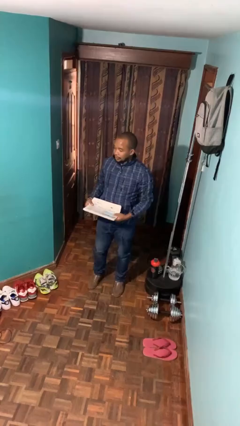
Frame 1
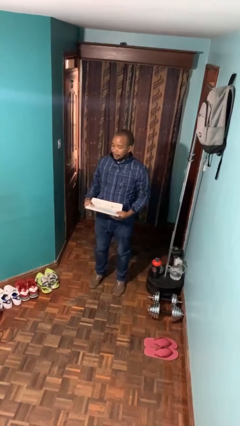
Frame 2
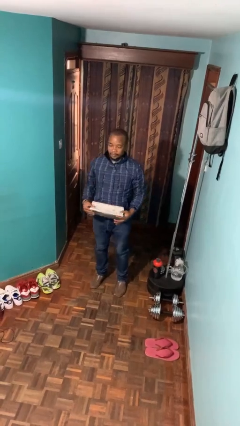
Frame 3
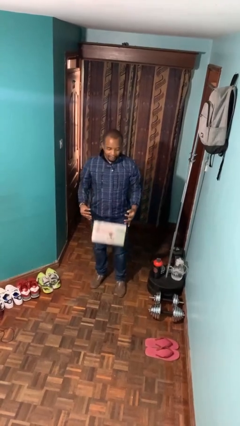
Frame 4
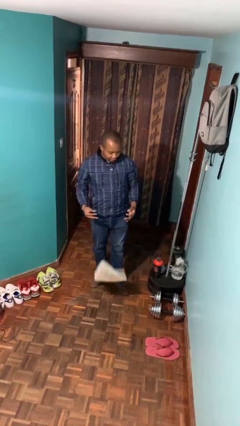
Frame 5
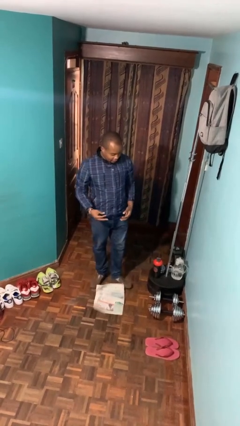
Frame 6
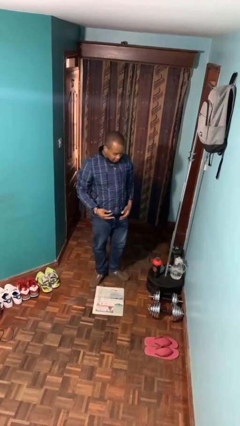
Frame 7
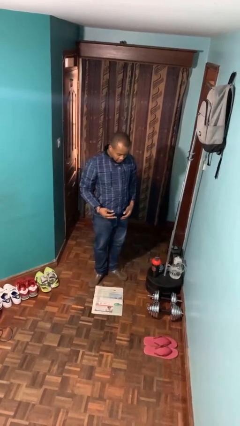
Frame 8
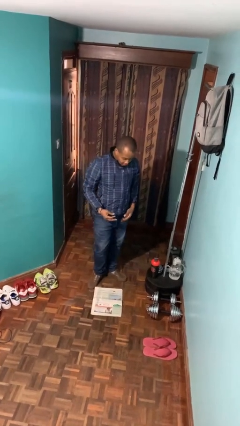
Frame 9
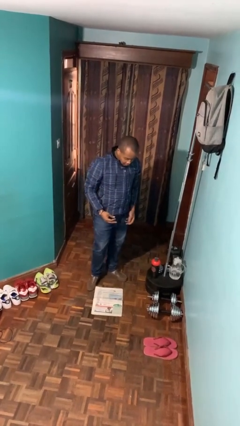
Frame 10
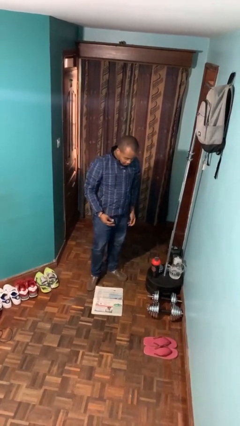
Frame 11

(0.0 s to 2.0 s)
person drops object

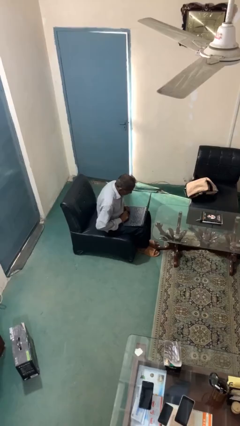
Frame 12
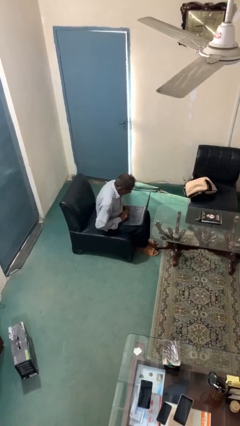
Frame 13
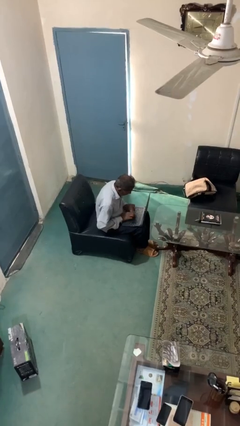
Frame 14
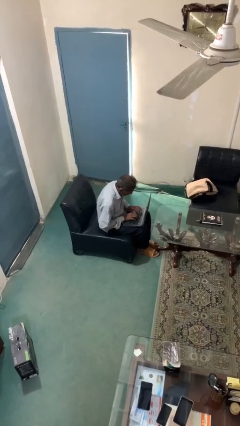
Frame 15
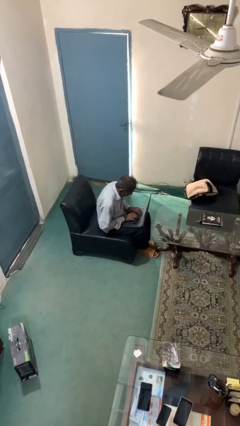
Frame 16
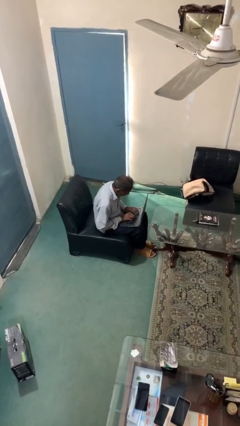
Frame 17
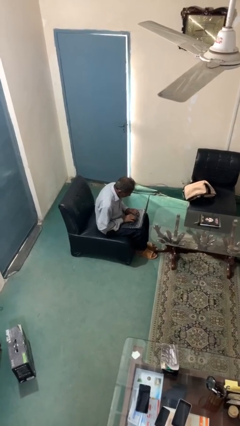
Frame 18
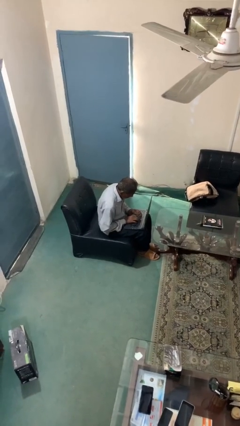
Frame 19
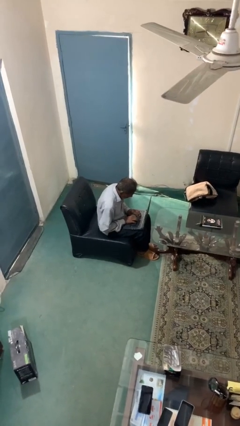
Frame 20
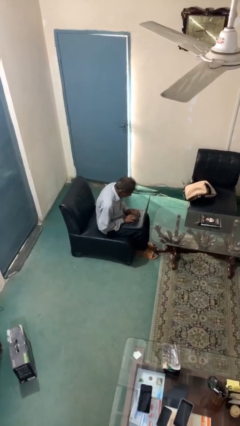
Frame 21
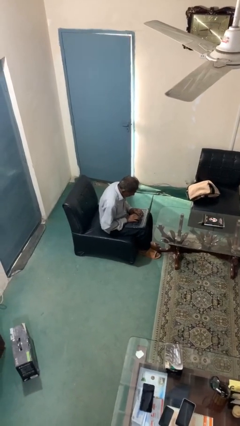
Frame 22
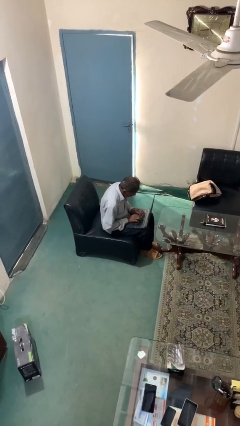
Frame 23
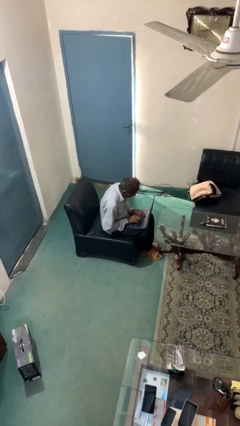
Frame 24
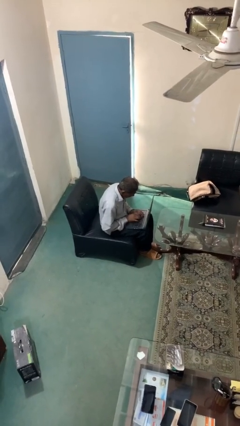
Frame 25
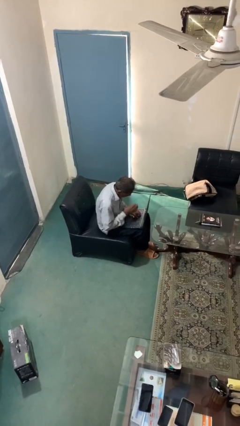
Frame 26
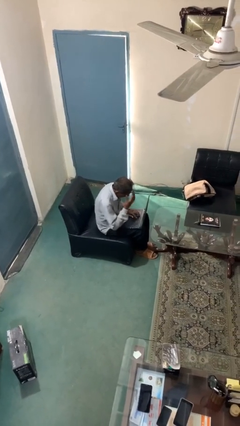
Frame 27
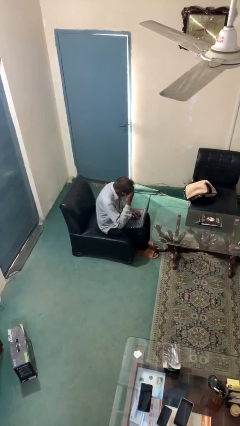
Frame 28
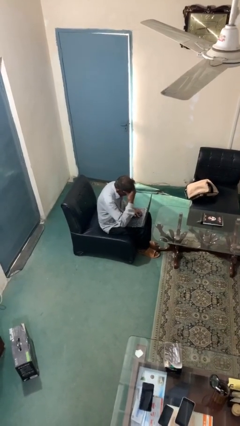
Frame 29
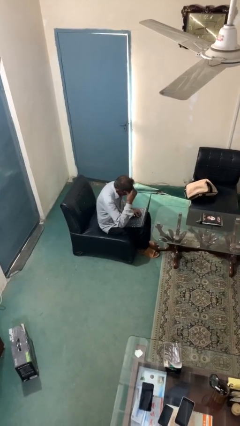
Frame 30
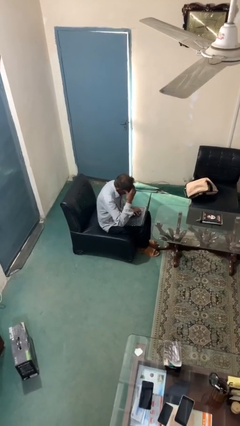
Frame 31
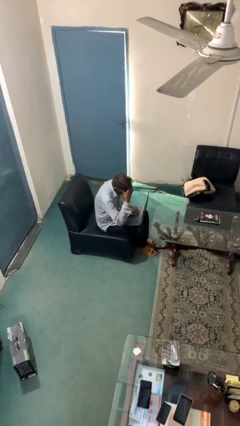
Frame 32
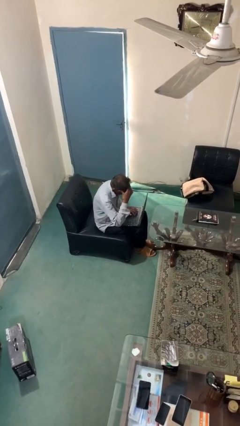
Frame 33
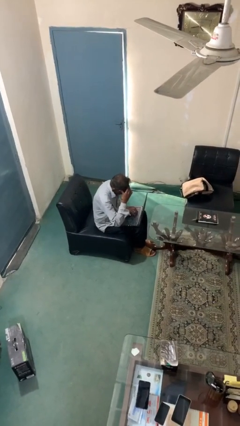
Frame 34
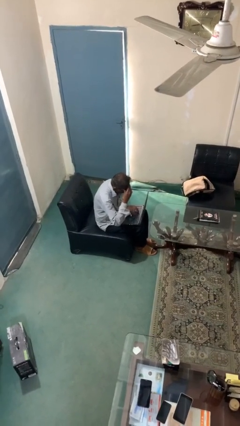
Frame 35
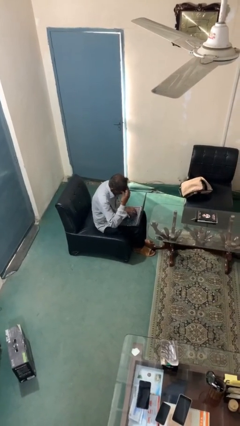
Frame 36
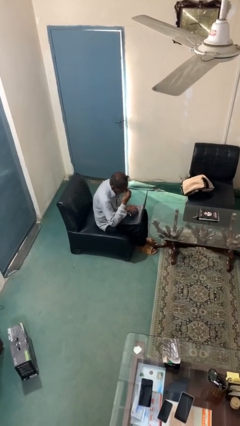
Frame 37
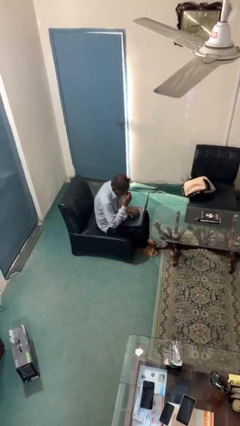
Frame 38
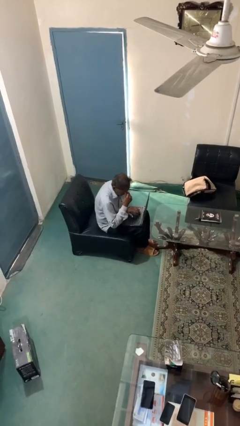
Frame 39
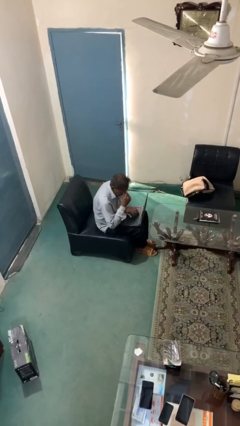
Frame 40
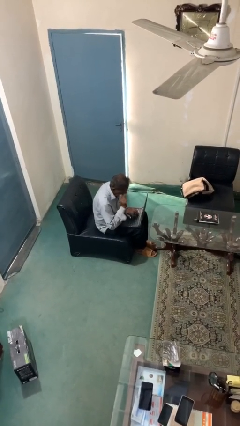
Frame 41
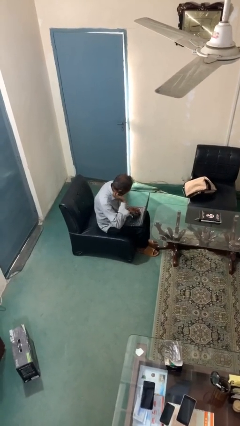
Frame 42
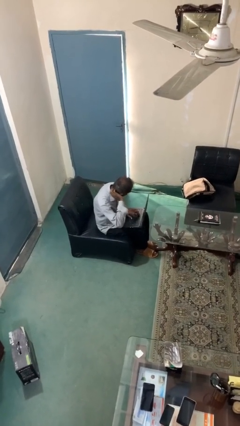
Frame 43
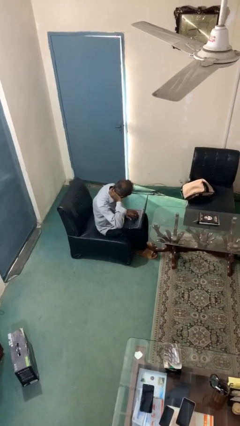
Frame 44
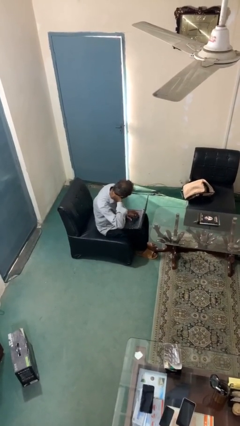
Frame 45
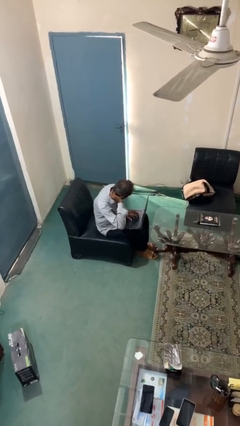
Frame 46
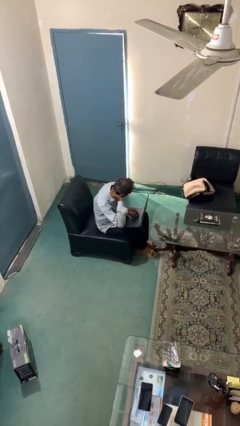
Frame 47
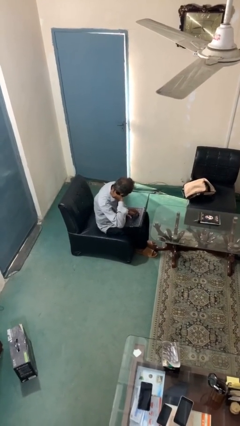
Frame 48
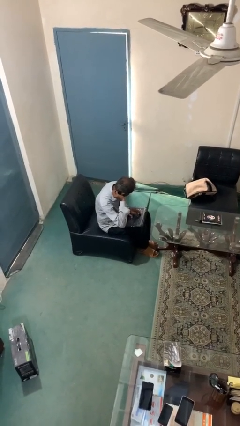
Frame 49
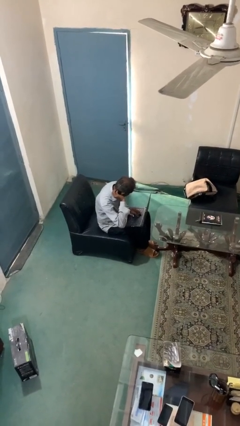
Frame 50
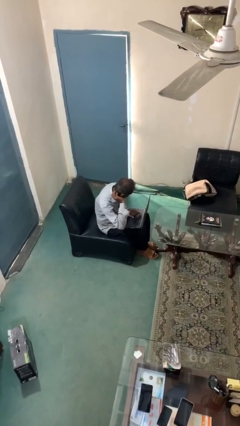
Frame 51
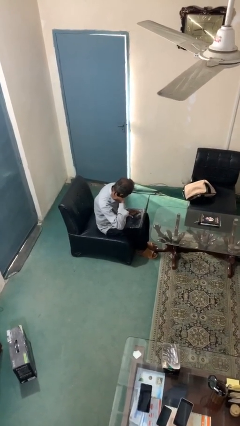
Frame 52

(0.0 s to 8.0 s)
person interacts with laptop

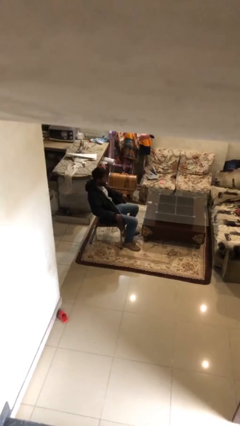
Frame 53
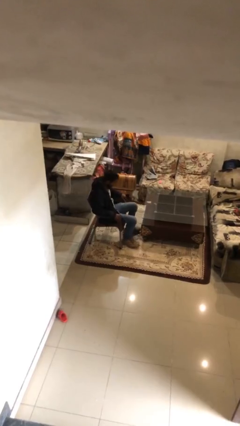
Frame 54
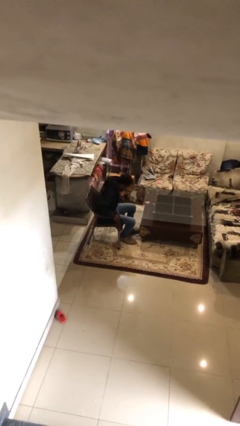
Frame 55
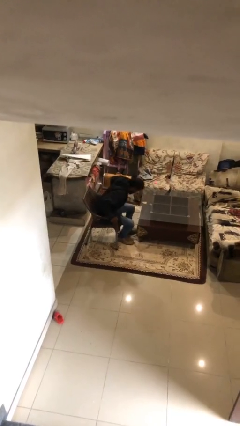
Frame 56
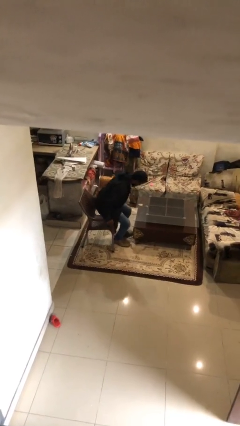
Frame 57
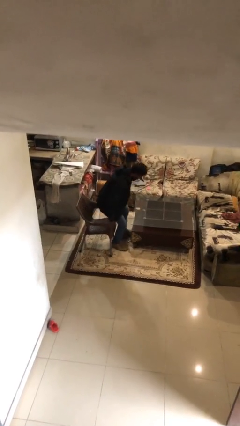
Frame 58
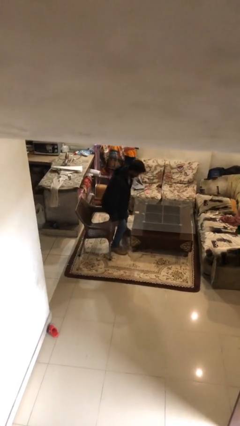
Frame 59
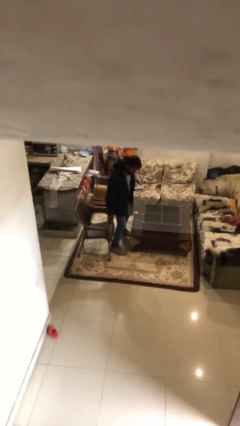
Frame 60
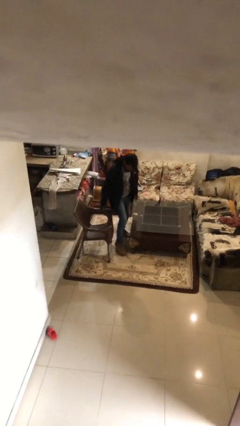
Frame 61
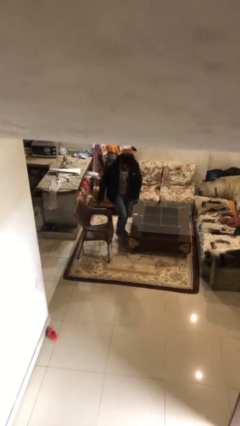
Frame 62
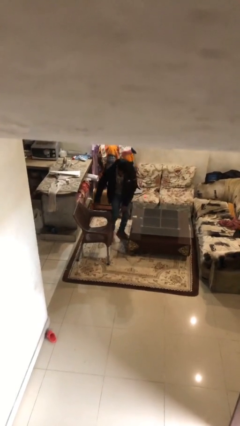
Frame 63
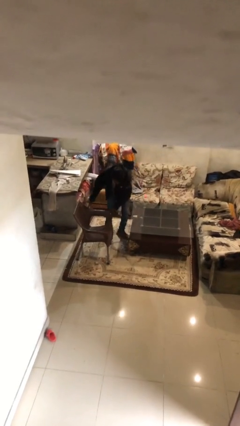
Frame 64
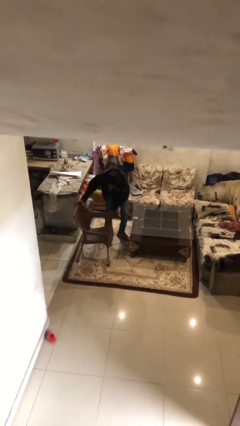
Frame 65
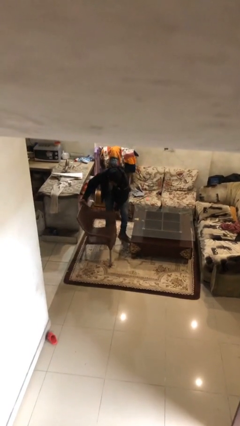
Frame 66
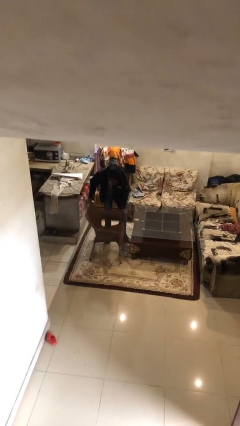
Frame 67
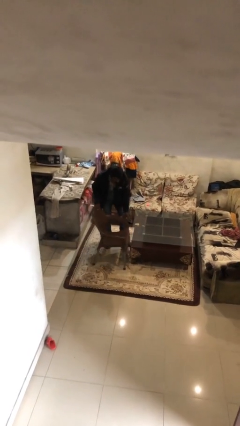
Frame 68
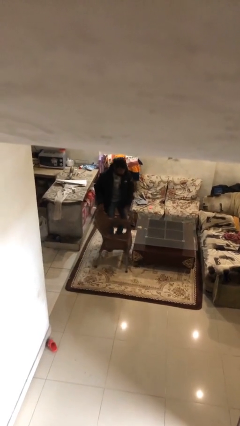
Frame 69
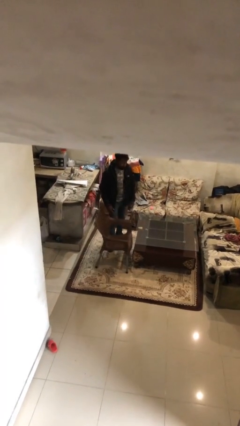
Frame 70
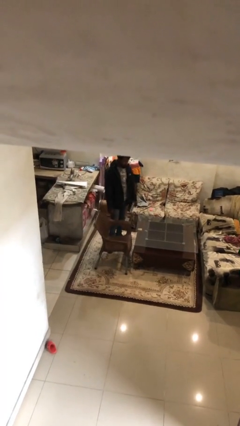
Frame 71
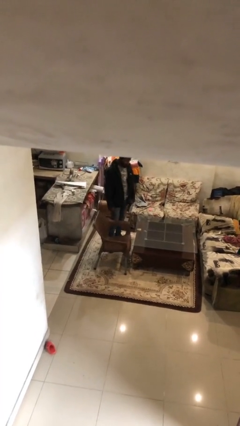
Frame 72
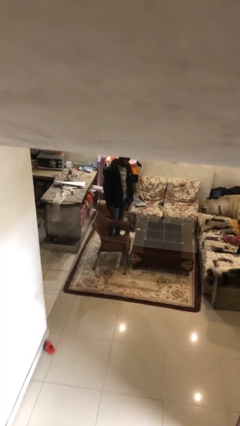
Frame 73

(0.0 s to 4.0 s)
person stands up

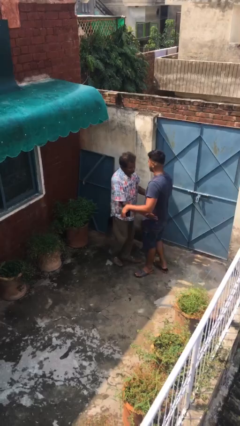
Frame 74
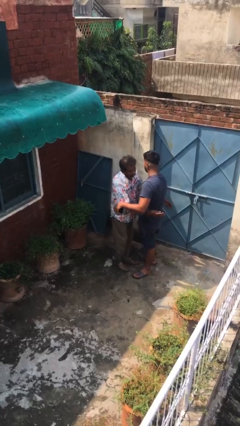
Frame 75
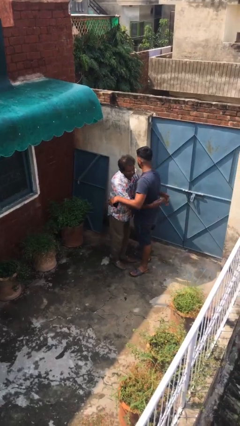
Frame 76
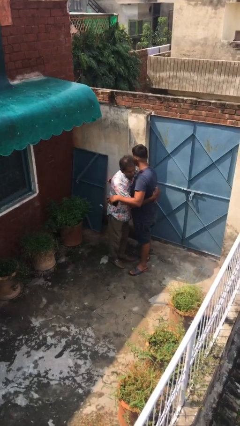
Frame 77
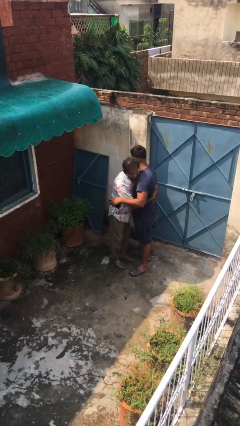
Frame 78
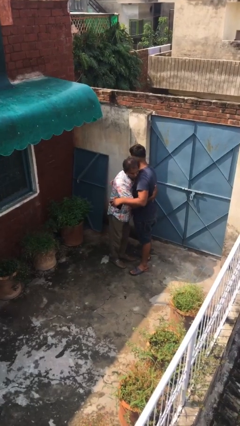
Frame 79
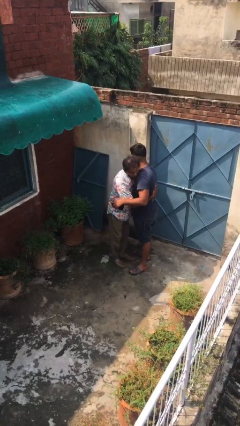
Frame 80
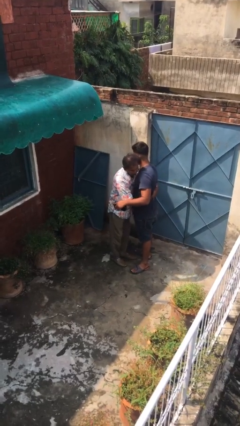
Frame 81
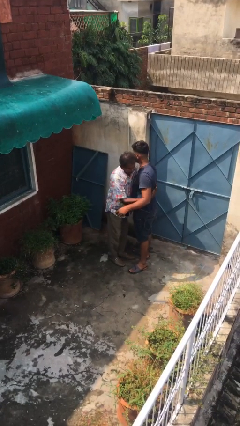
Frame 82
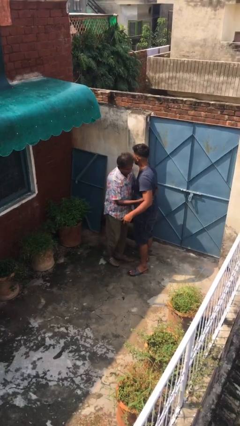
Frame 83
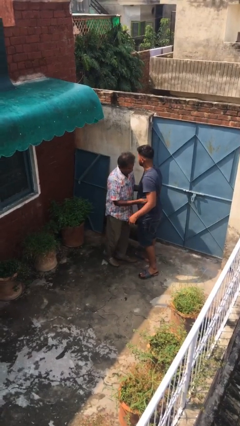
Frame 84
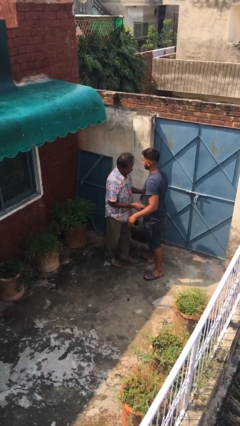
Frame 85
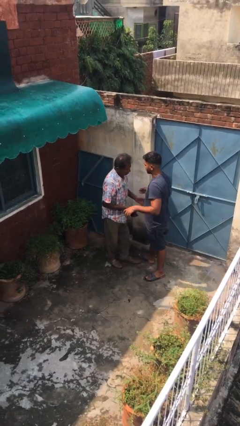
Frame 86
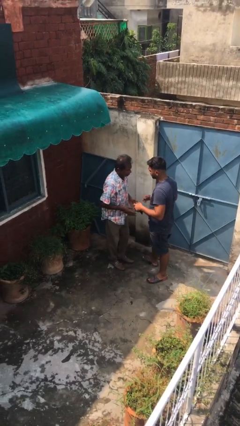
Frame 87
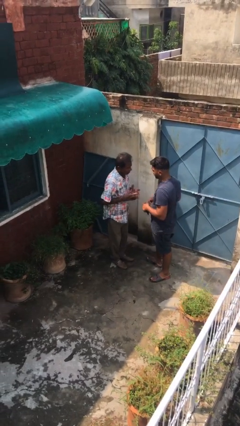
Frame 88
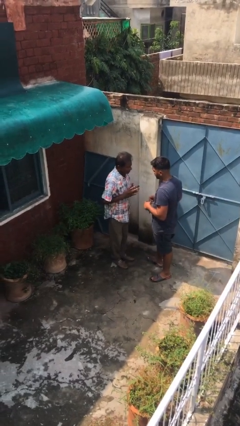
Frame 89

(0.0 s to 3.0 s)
person embraces person

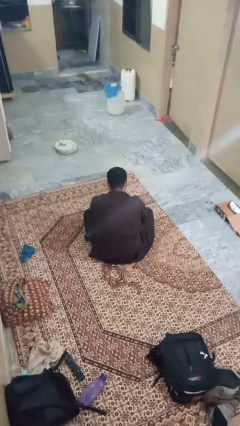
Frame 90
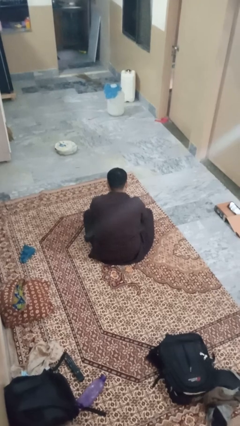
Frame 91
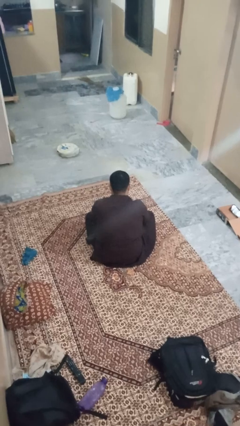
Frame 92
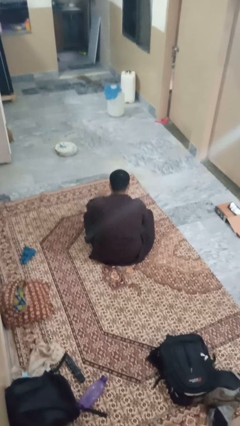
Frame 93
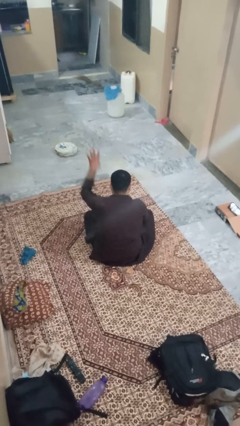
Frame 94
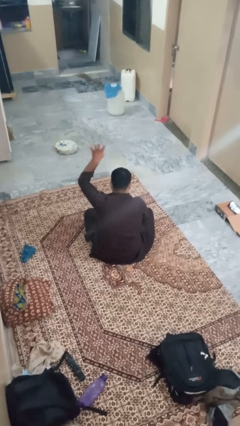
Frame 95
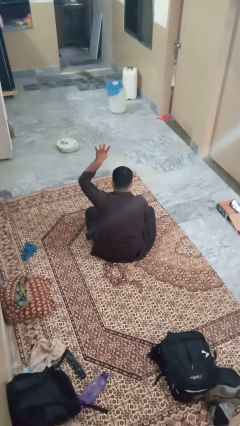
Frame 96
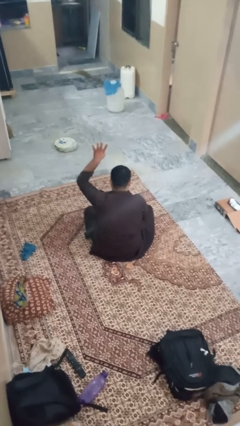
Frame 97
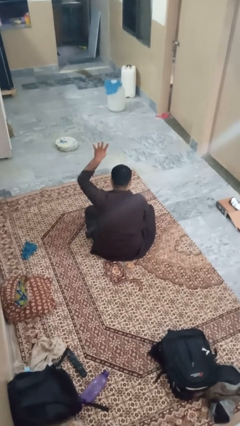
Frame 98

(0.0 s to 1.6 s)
person gestures number four
